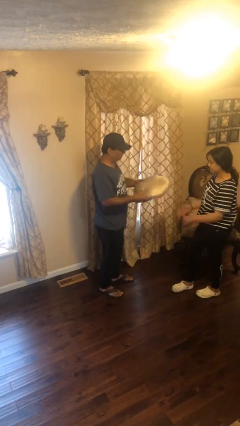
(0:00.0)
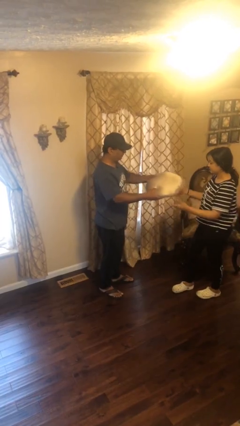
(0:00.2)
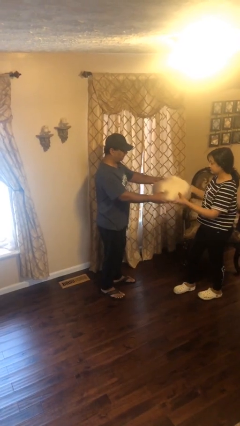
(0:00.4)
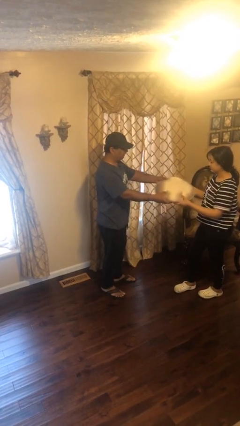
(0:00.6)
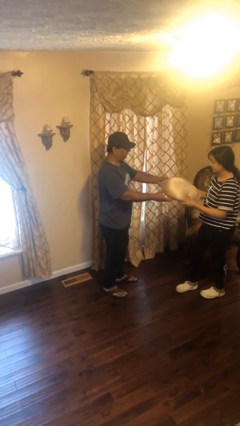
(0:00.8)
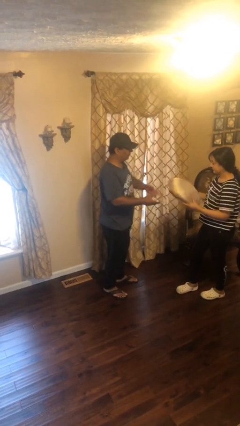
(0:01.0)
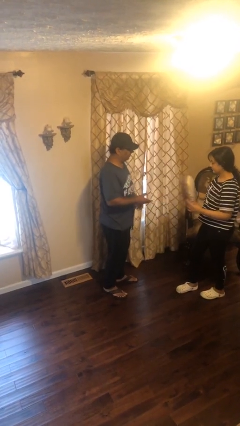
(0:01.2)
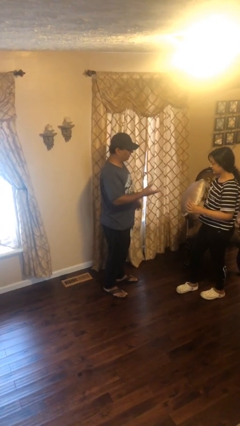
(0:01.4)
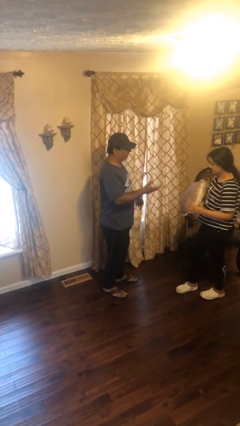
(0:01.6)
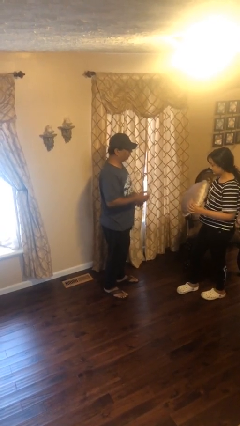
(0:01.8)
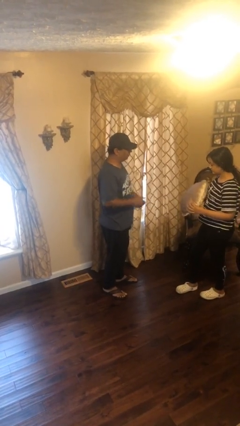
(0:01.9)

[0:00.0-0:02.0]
person transfers object to person

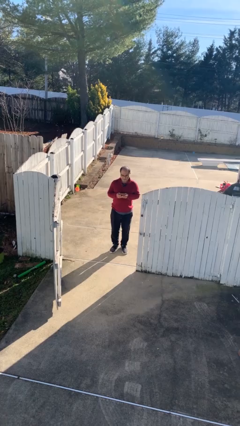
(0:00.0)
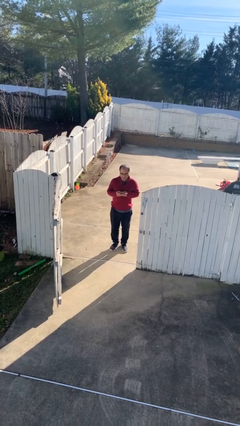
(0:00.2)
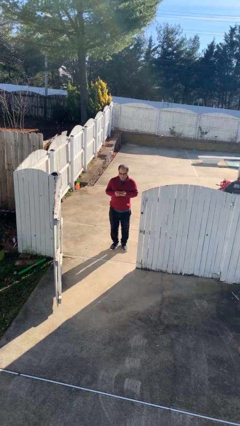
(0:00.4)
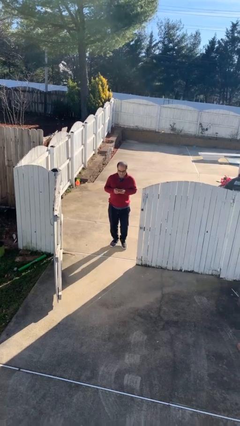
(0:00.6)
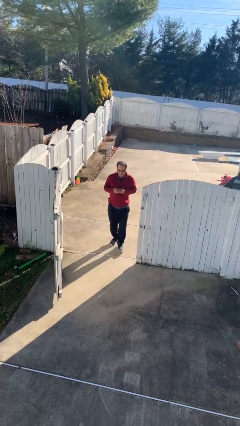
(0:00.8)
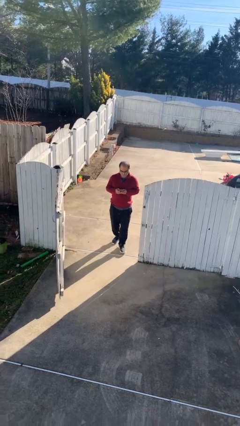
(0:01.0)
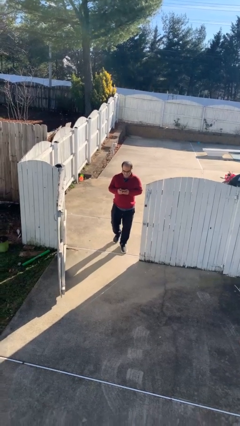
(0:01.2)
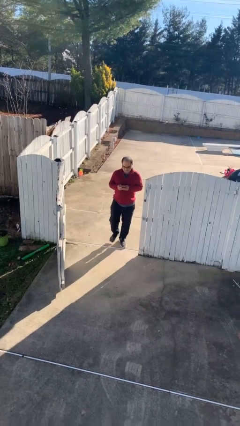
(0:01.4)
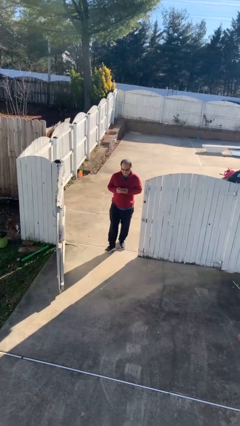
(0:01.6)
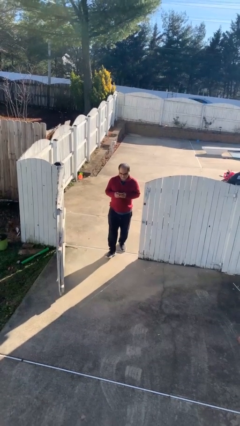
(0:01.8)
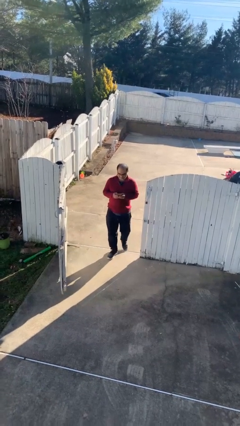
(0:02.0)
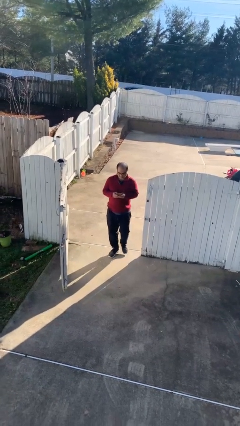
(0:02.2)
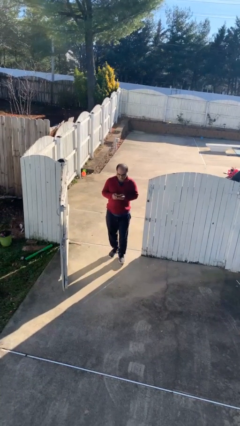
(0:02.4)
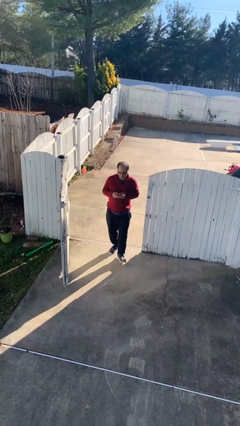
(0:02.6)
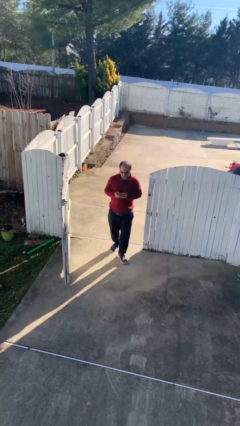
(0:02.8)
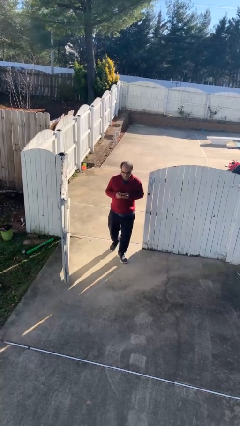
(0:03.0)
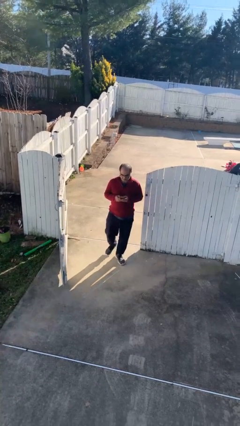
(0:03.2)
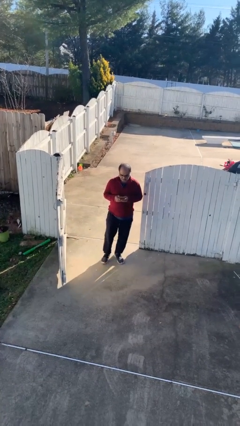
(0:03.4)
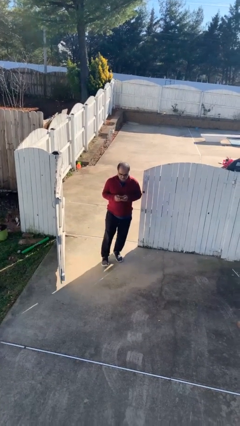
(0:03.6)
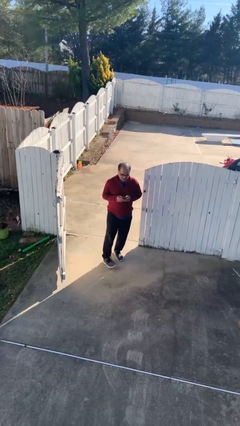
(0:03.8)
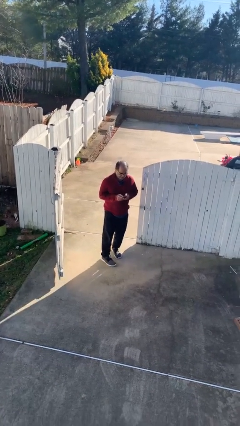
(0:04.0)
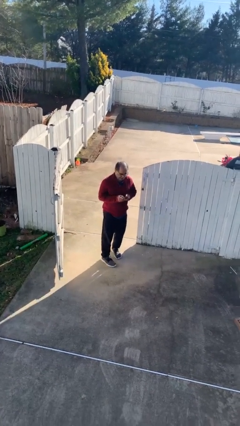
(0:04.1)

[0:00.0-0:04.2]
person enters scene through structure

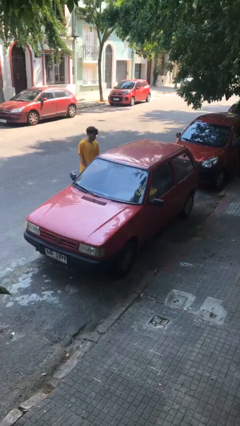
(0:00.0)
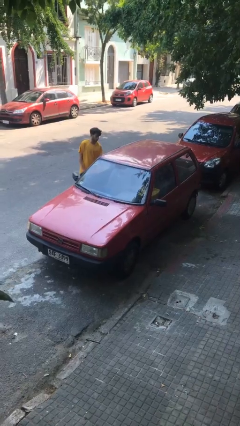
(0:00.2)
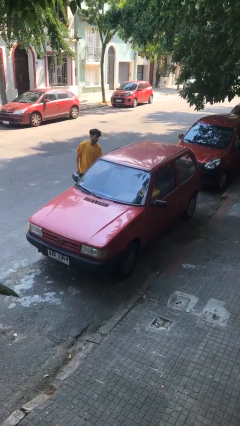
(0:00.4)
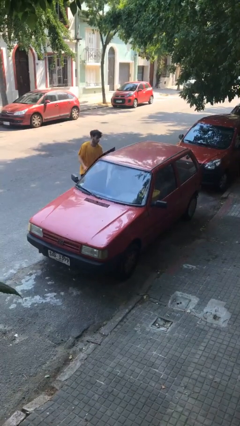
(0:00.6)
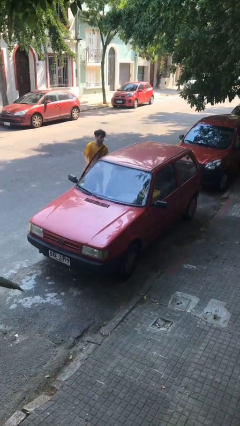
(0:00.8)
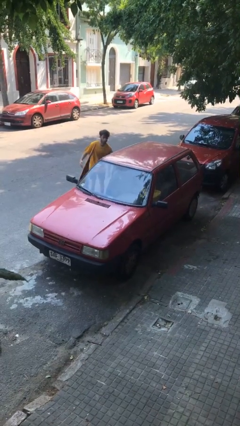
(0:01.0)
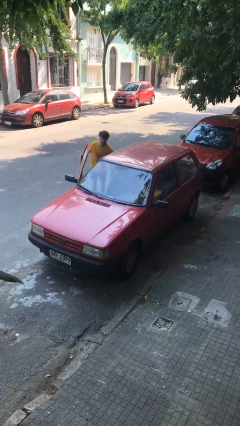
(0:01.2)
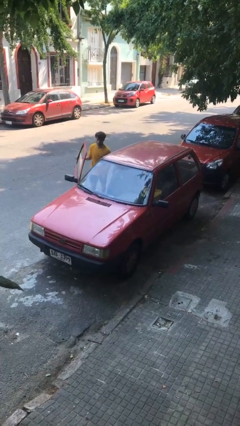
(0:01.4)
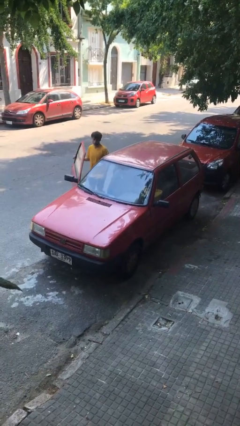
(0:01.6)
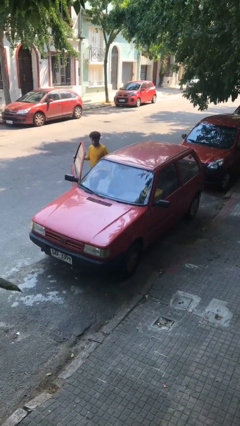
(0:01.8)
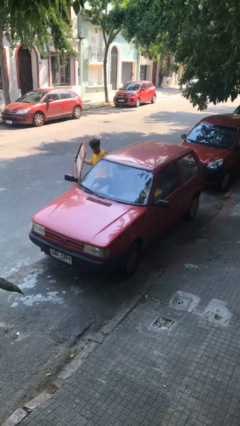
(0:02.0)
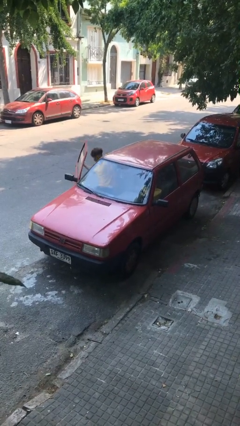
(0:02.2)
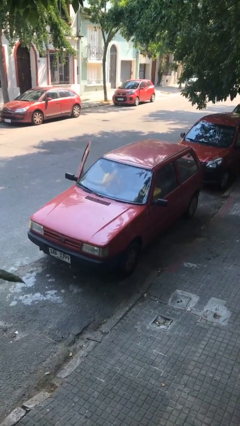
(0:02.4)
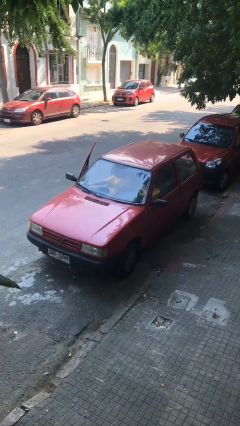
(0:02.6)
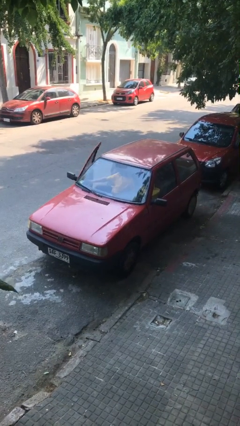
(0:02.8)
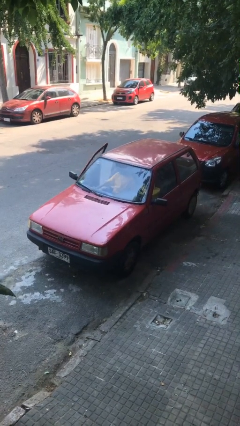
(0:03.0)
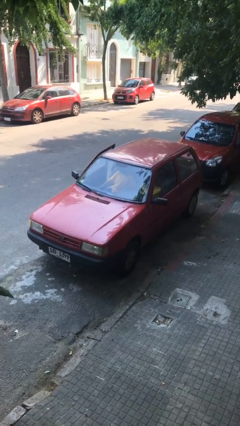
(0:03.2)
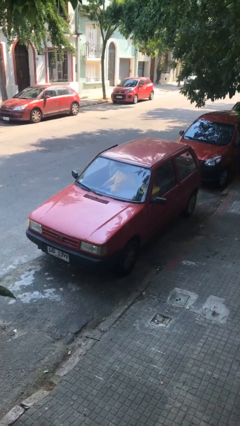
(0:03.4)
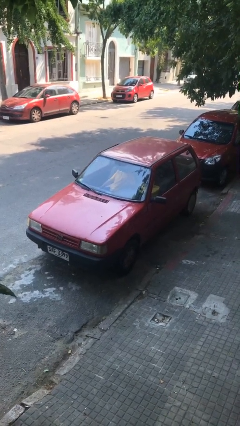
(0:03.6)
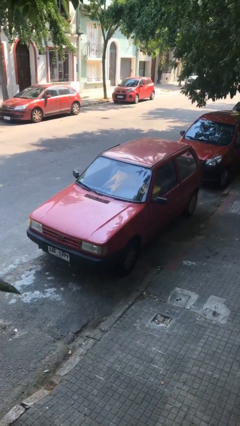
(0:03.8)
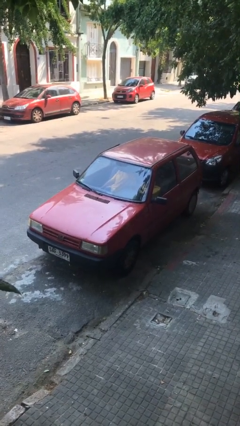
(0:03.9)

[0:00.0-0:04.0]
car picks up person

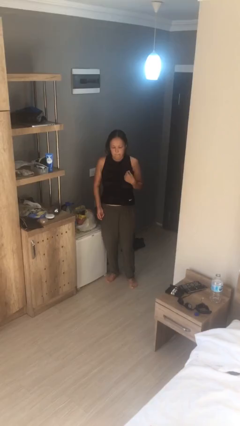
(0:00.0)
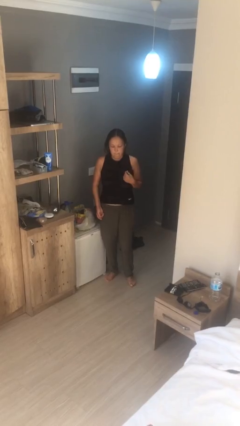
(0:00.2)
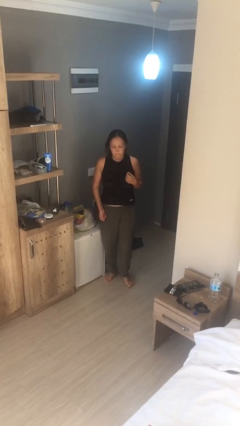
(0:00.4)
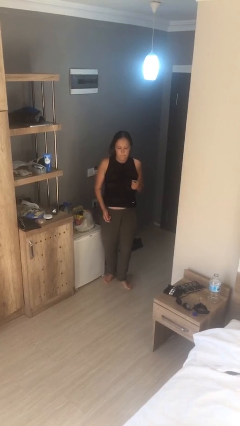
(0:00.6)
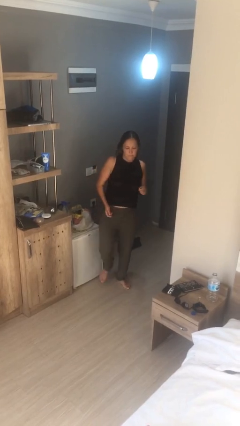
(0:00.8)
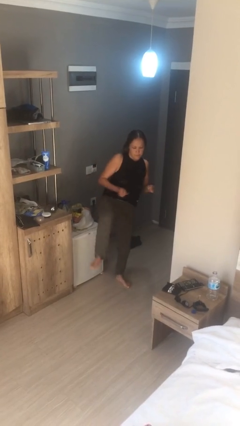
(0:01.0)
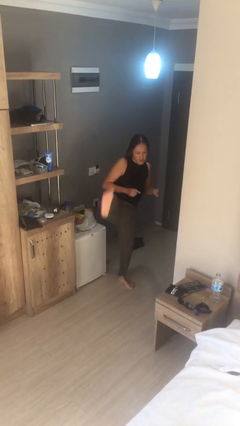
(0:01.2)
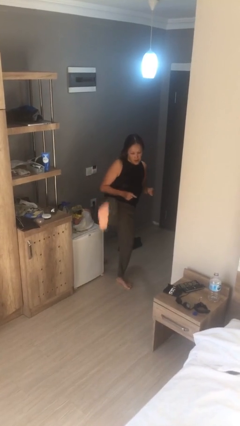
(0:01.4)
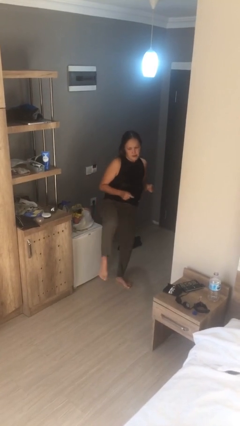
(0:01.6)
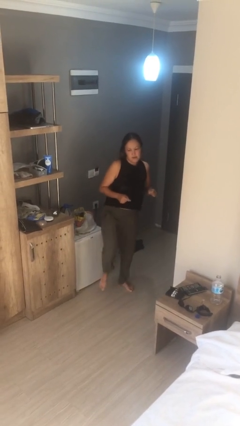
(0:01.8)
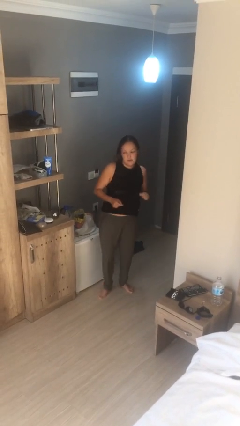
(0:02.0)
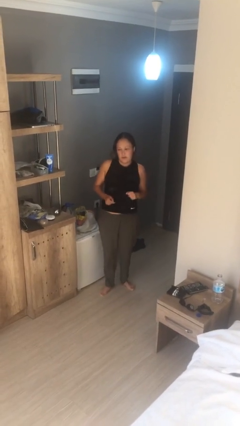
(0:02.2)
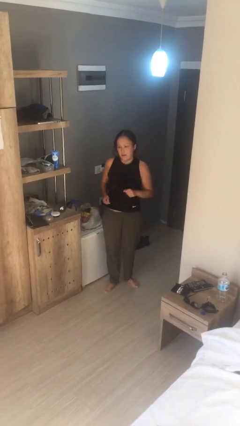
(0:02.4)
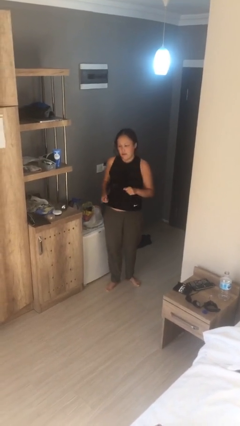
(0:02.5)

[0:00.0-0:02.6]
person karate kicks

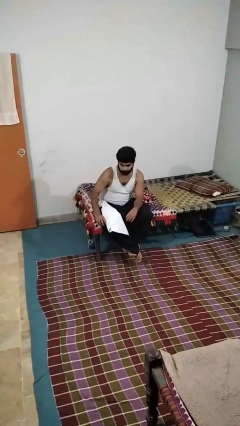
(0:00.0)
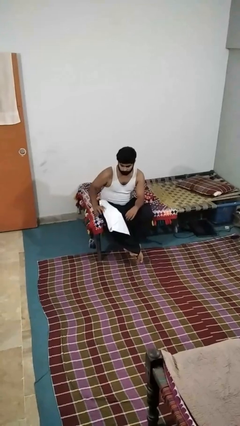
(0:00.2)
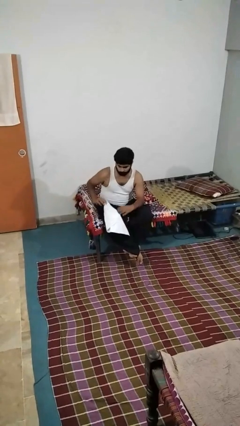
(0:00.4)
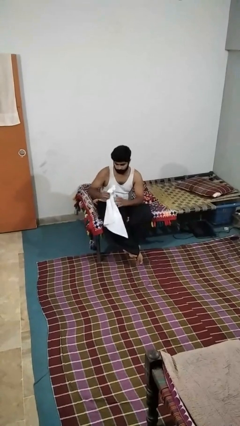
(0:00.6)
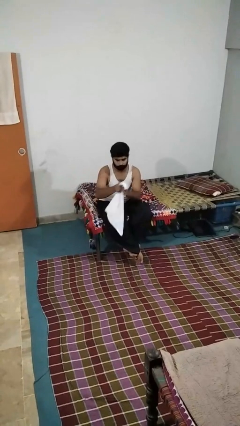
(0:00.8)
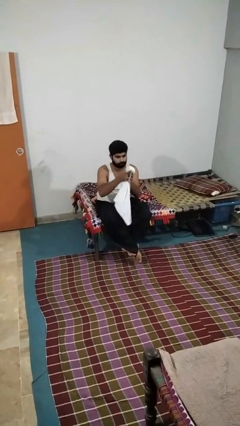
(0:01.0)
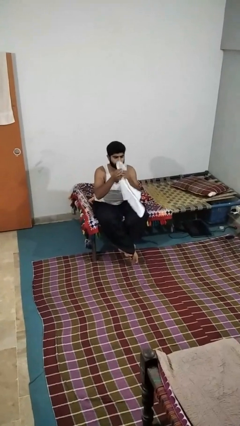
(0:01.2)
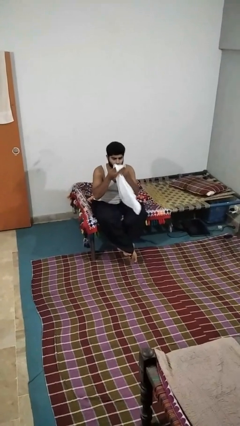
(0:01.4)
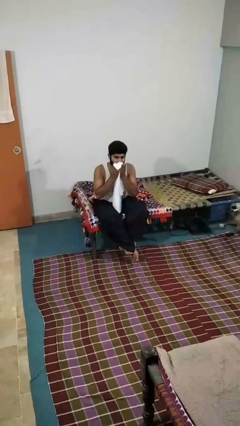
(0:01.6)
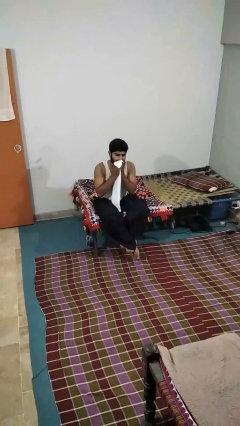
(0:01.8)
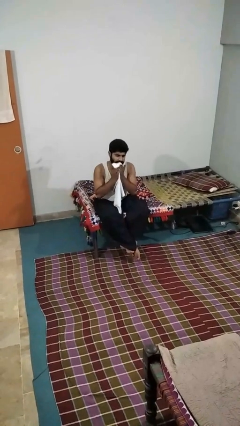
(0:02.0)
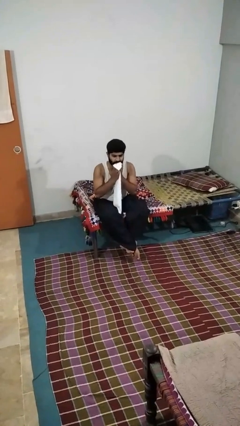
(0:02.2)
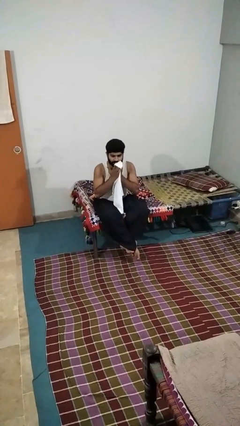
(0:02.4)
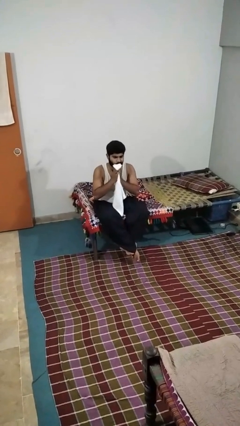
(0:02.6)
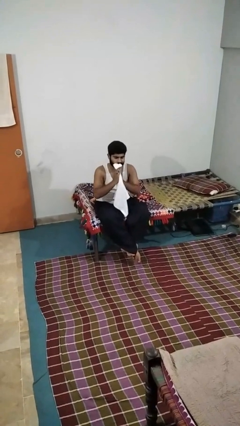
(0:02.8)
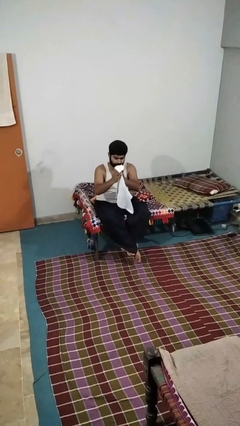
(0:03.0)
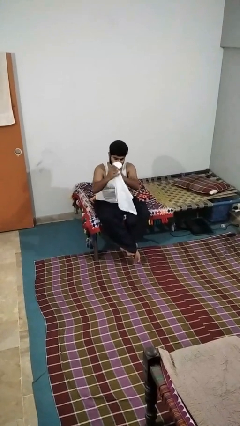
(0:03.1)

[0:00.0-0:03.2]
person wipes mouth with napkin

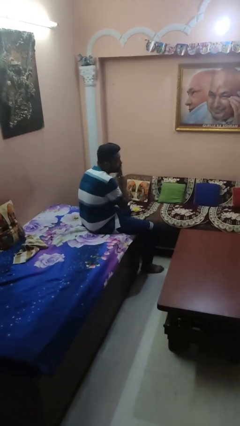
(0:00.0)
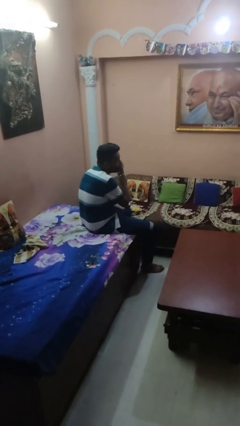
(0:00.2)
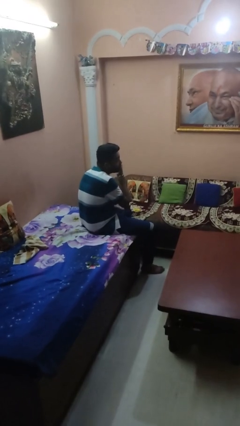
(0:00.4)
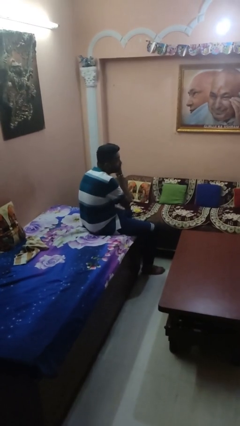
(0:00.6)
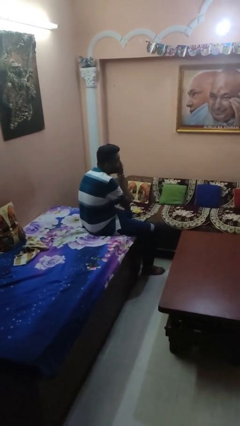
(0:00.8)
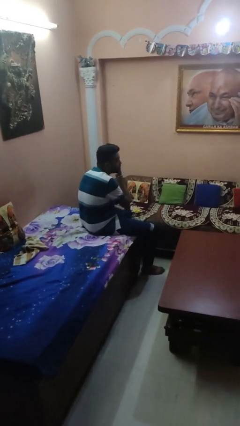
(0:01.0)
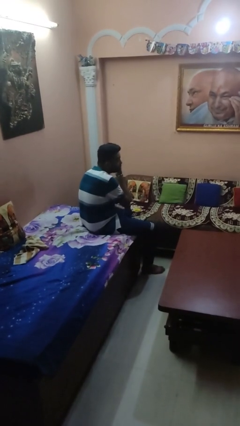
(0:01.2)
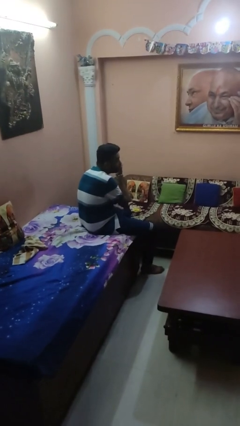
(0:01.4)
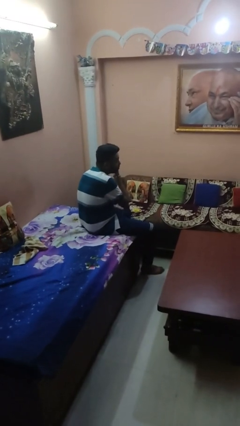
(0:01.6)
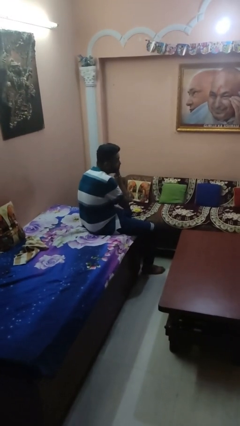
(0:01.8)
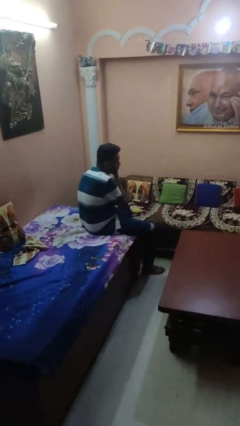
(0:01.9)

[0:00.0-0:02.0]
person applies foundation makeup
